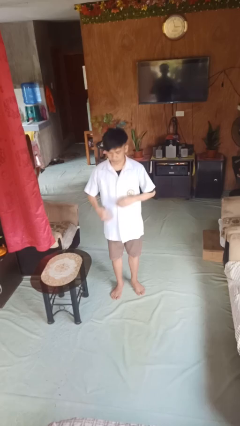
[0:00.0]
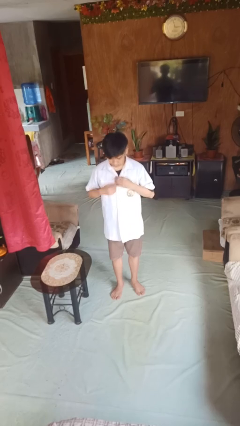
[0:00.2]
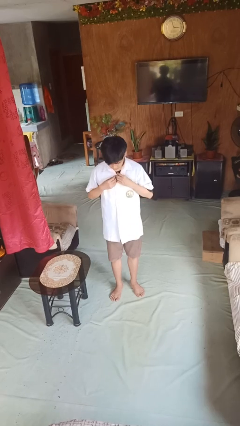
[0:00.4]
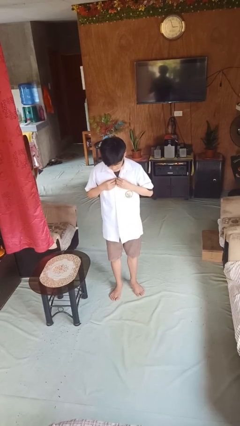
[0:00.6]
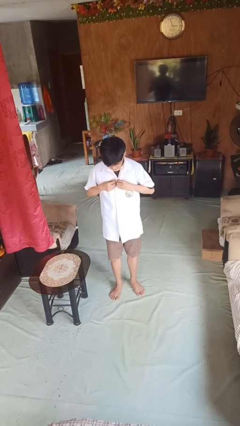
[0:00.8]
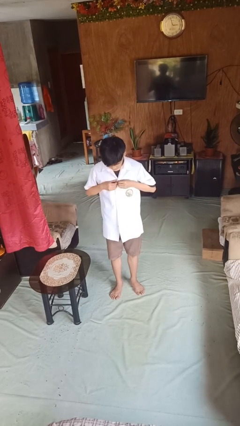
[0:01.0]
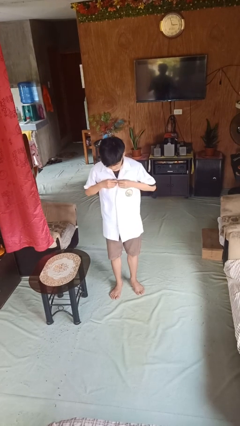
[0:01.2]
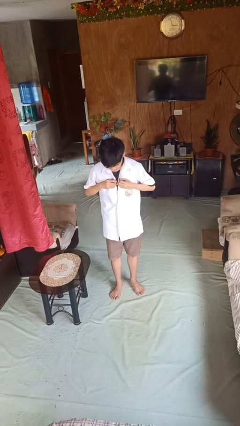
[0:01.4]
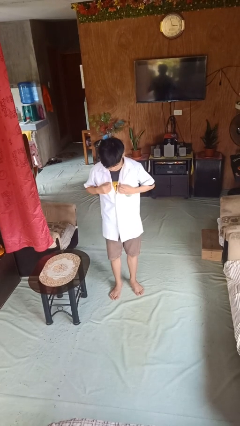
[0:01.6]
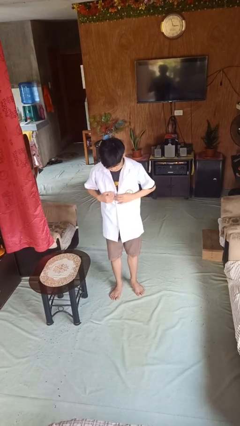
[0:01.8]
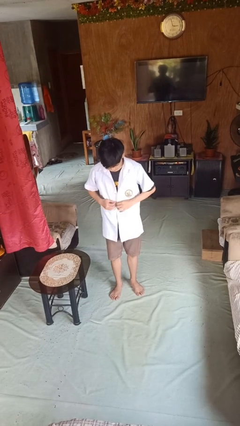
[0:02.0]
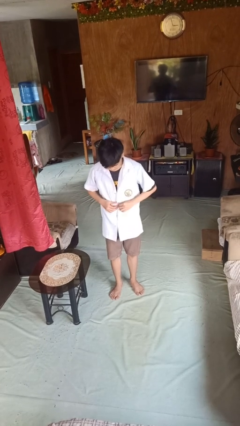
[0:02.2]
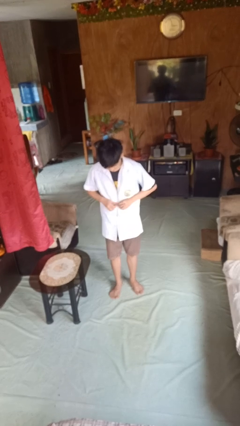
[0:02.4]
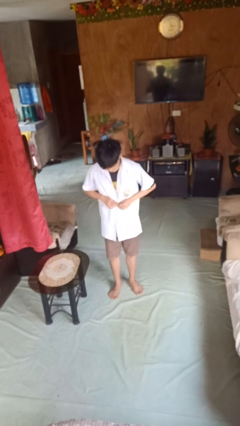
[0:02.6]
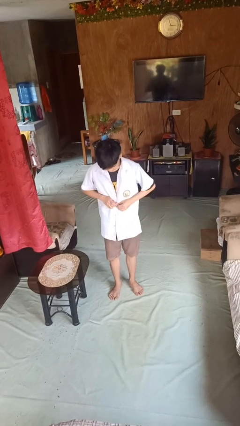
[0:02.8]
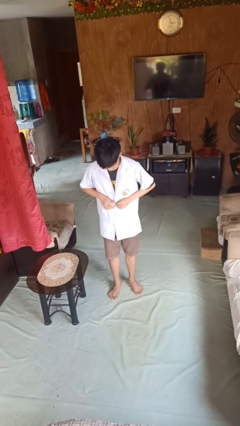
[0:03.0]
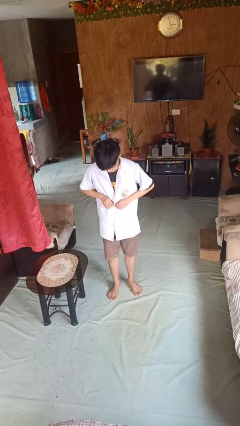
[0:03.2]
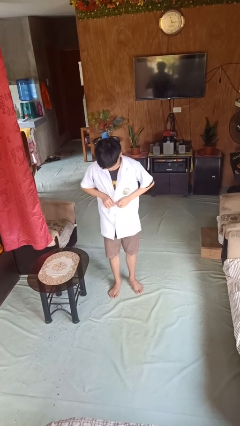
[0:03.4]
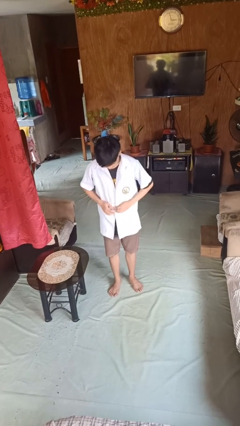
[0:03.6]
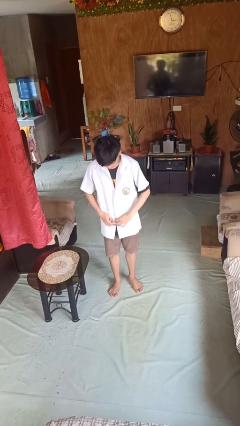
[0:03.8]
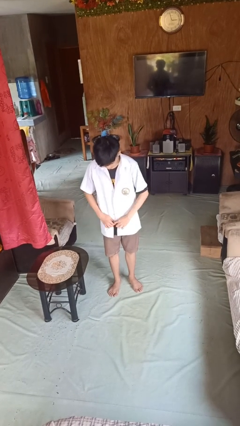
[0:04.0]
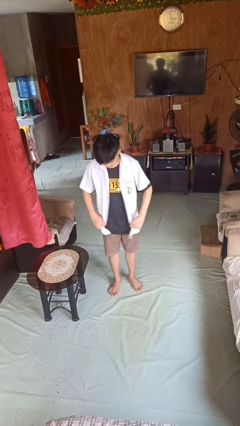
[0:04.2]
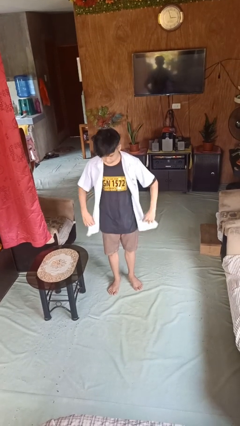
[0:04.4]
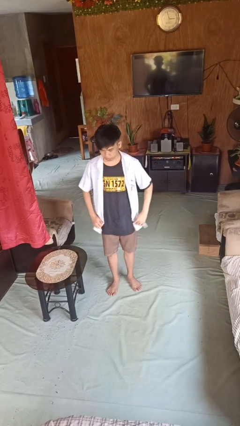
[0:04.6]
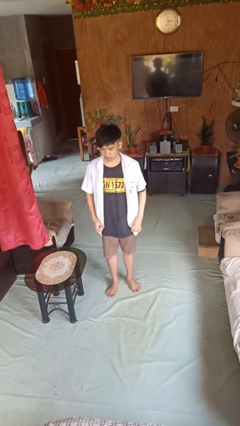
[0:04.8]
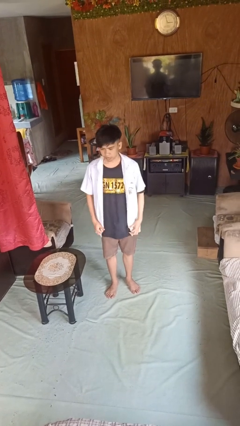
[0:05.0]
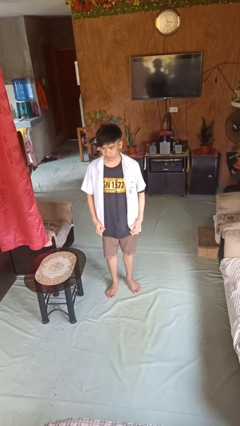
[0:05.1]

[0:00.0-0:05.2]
person unbuttons shirt

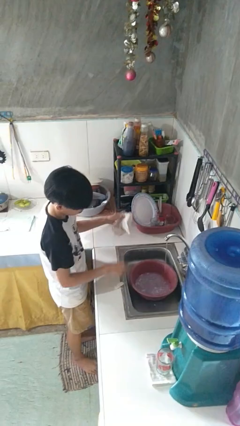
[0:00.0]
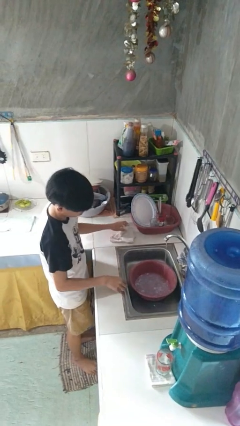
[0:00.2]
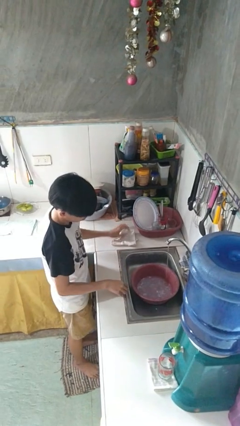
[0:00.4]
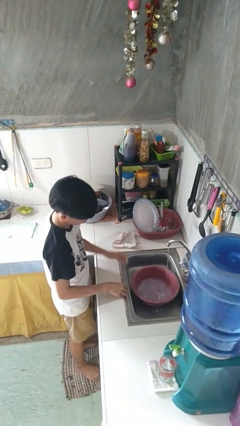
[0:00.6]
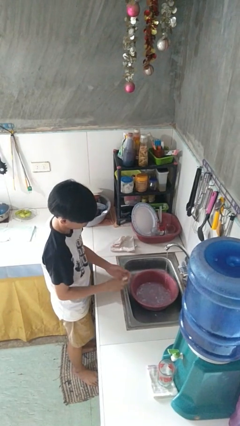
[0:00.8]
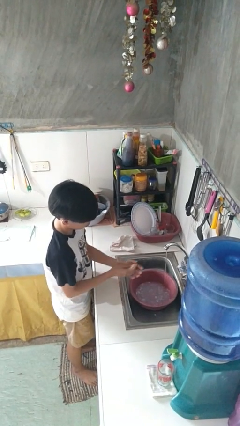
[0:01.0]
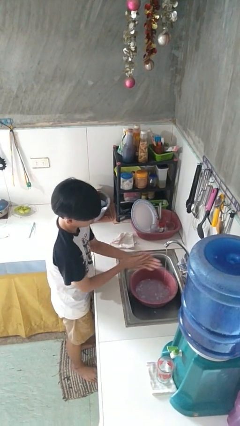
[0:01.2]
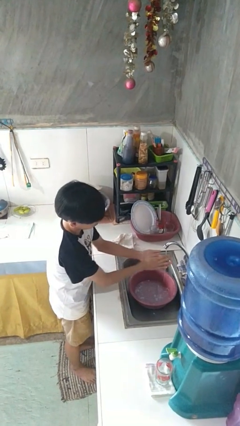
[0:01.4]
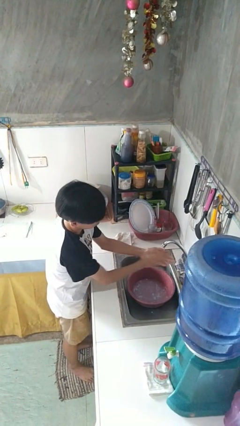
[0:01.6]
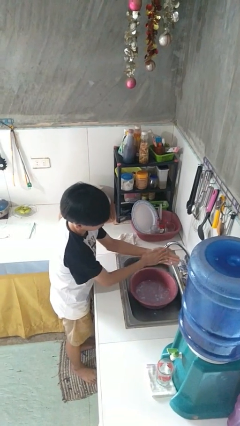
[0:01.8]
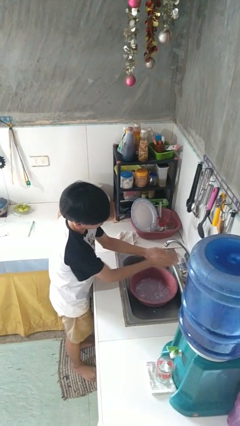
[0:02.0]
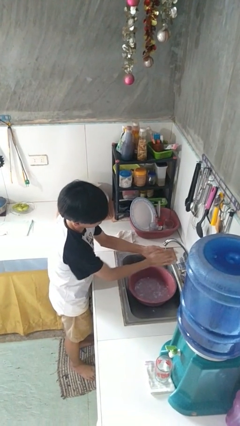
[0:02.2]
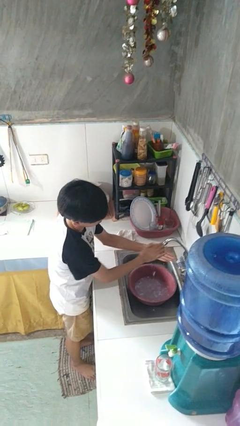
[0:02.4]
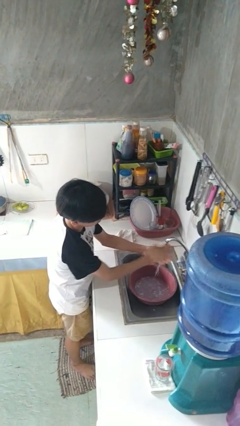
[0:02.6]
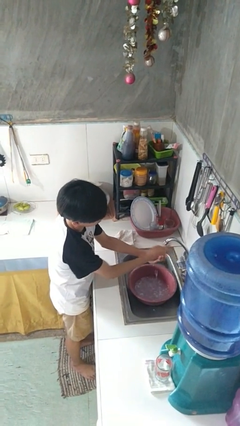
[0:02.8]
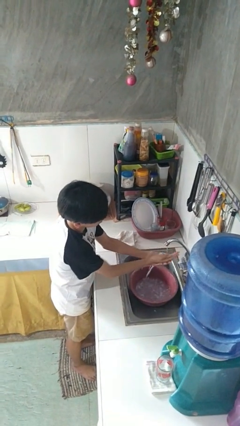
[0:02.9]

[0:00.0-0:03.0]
person washes hands

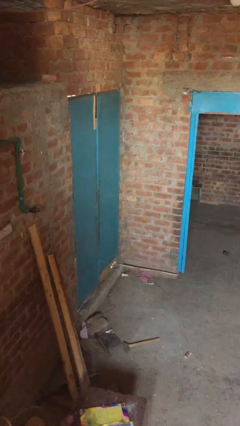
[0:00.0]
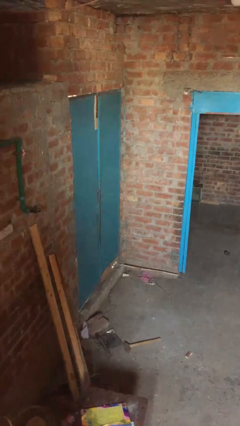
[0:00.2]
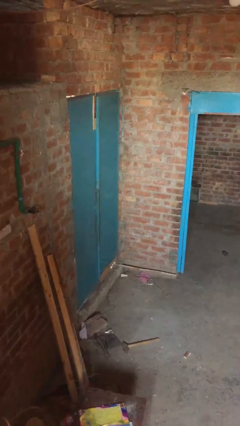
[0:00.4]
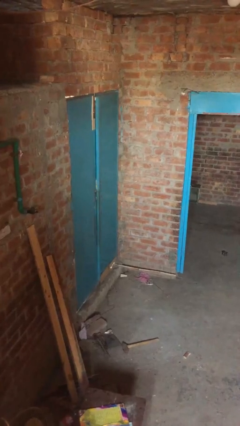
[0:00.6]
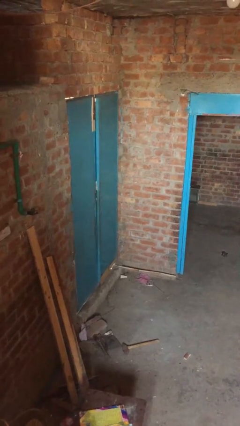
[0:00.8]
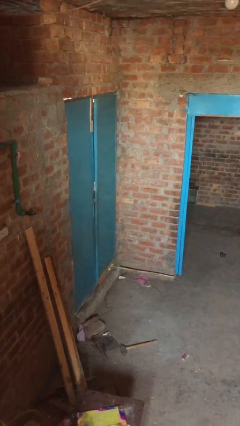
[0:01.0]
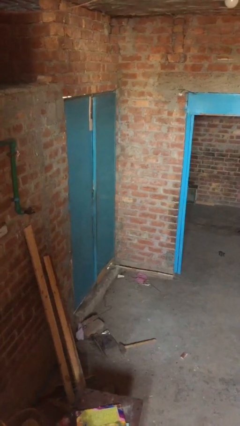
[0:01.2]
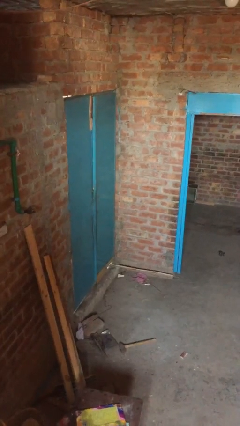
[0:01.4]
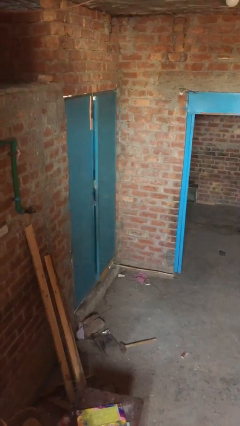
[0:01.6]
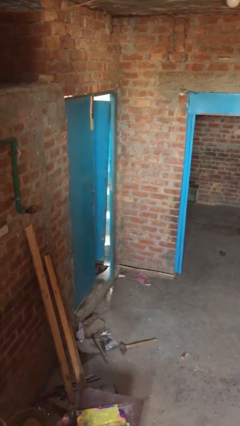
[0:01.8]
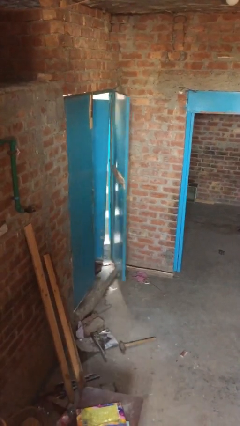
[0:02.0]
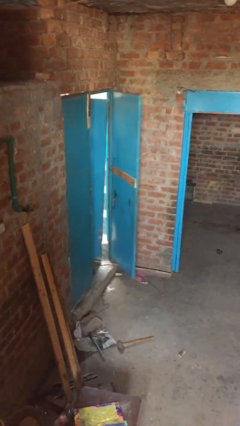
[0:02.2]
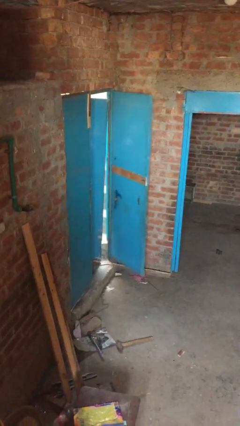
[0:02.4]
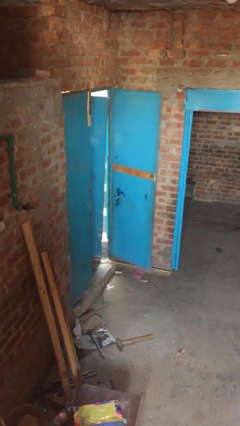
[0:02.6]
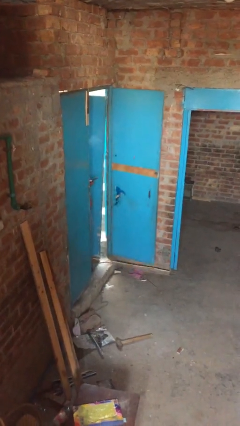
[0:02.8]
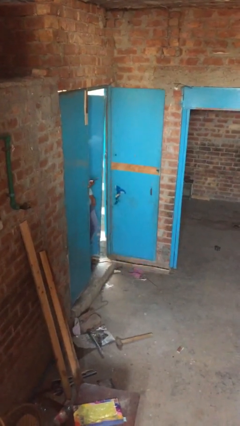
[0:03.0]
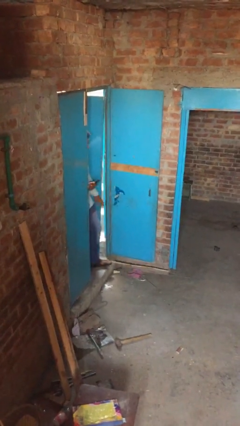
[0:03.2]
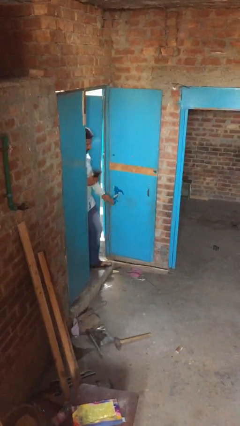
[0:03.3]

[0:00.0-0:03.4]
person opens facility door

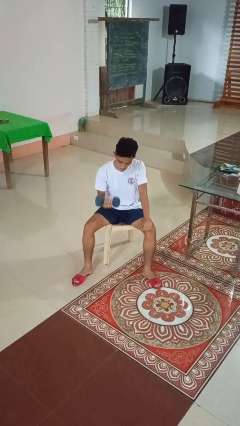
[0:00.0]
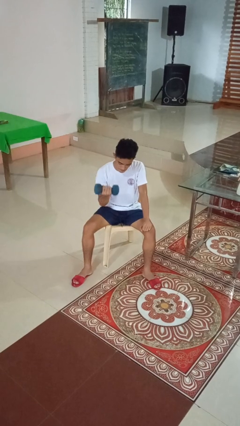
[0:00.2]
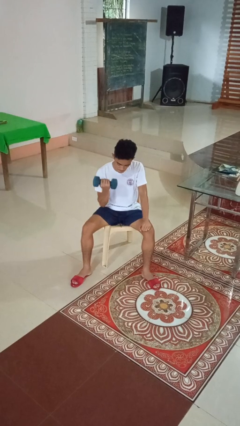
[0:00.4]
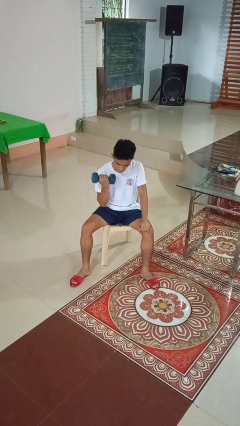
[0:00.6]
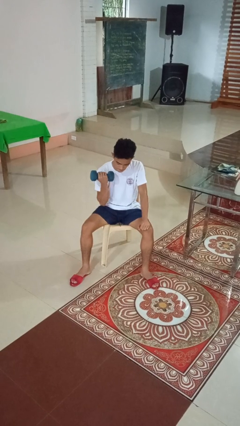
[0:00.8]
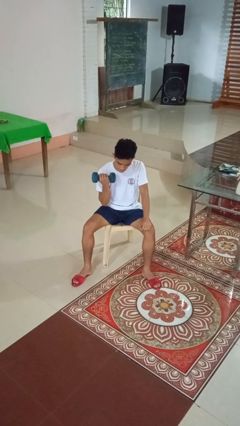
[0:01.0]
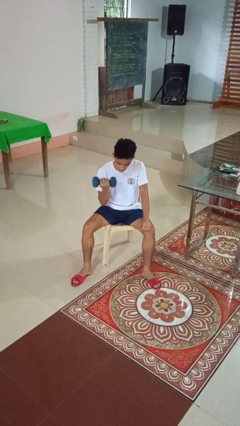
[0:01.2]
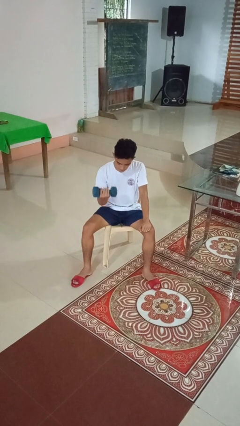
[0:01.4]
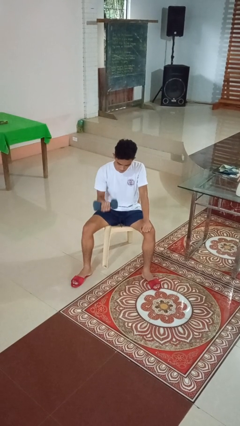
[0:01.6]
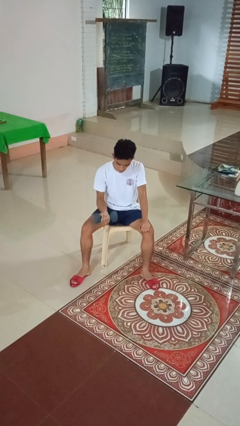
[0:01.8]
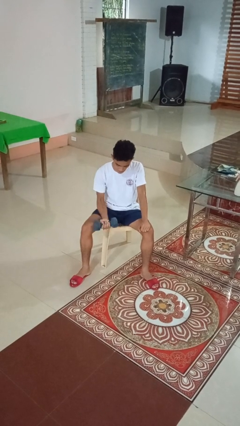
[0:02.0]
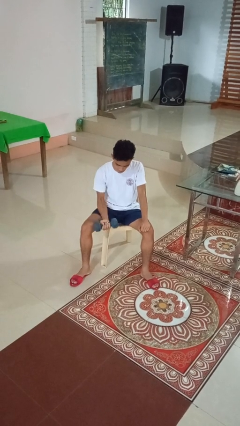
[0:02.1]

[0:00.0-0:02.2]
person lifts dumbbells

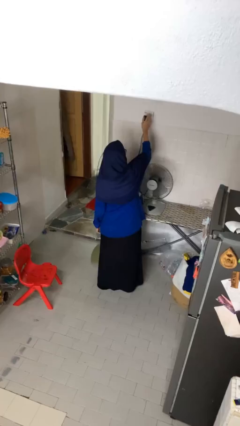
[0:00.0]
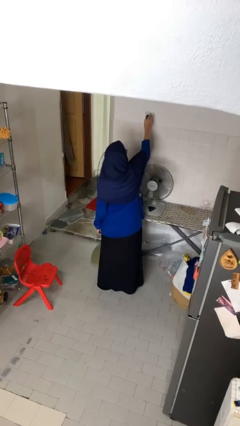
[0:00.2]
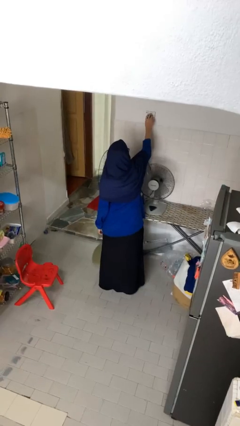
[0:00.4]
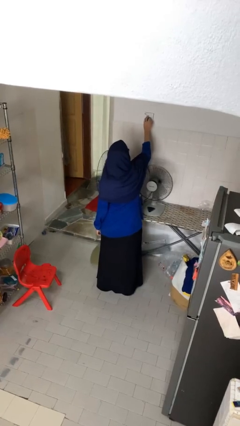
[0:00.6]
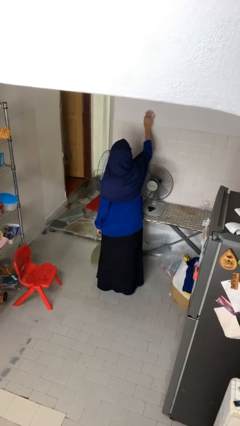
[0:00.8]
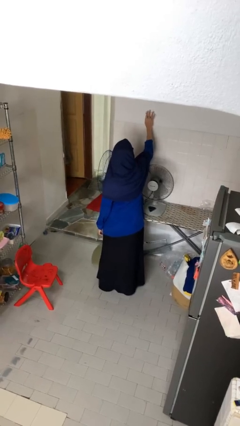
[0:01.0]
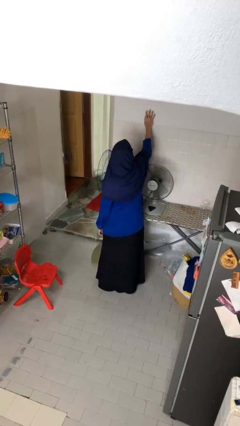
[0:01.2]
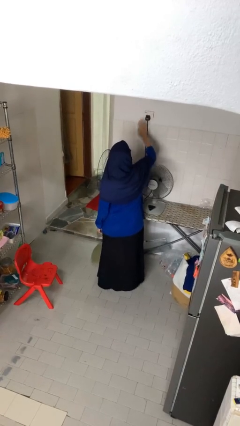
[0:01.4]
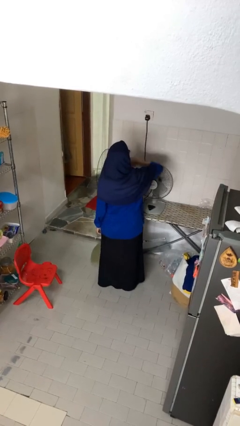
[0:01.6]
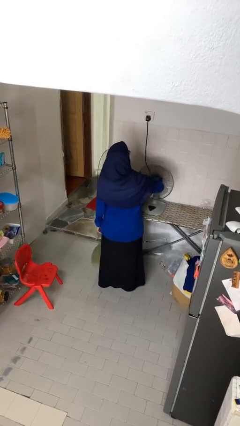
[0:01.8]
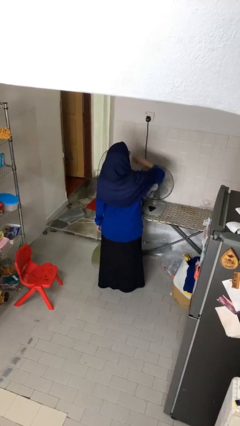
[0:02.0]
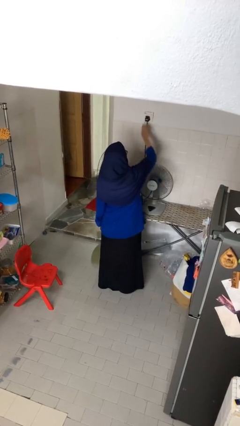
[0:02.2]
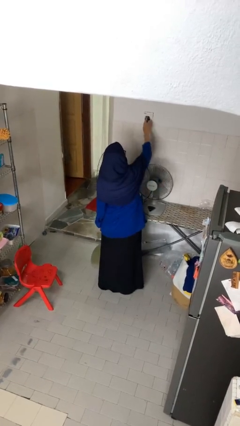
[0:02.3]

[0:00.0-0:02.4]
person plugs into electrical socket

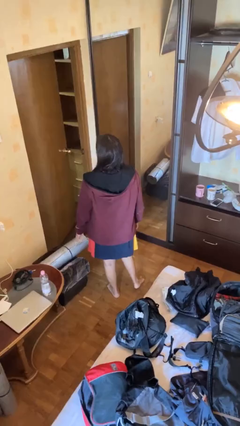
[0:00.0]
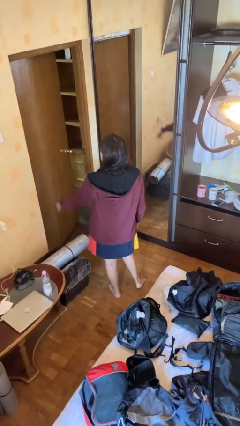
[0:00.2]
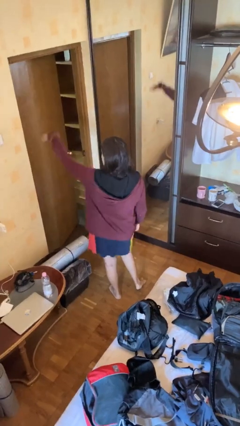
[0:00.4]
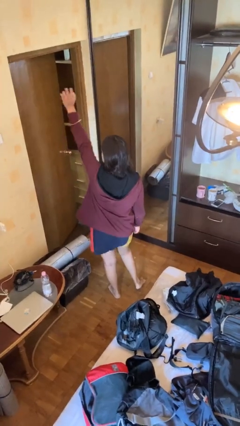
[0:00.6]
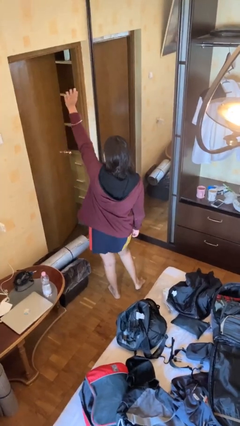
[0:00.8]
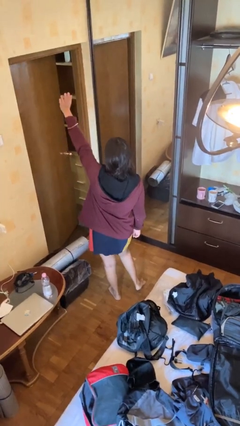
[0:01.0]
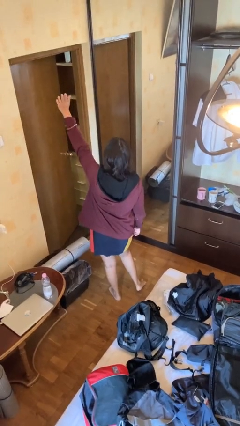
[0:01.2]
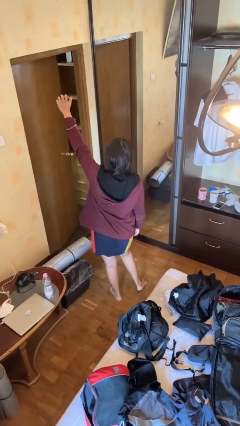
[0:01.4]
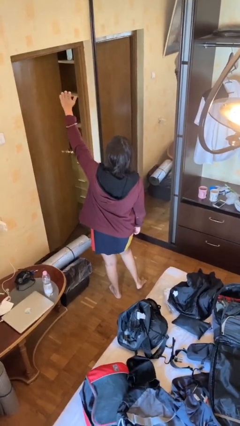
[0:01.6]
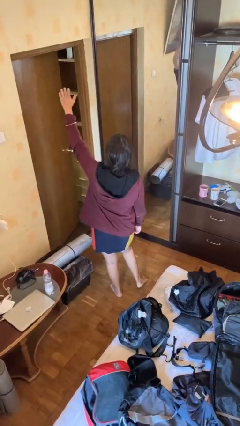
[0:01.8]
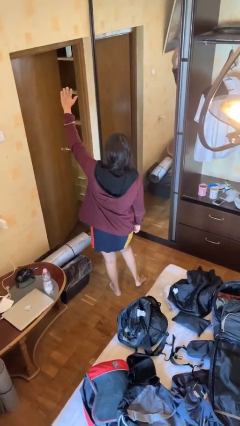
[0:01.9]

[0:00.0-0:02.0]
person gestures swipe up
